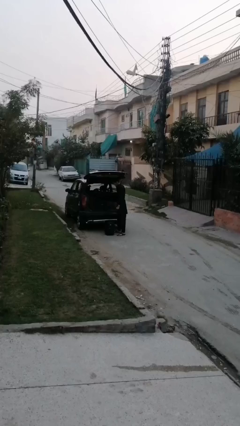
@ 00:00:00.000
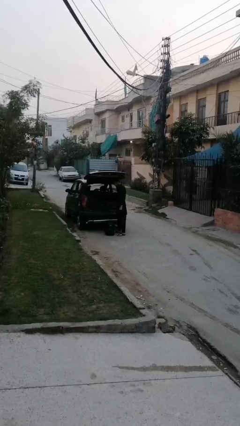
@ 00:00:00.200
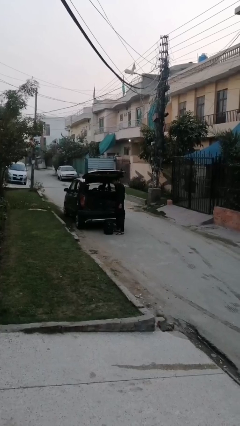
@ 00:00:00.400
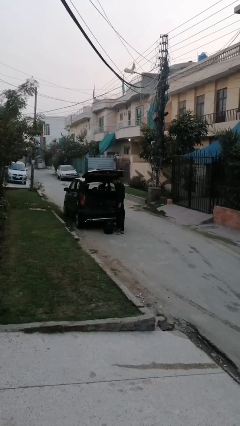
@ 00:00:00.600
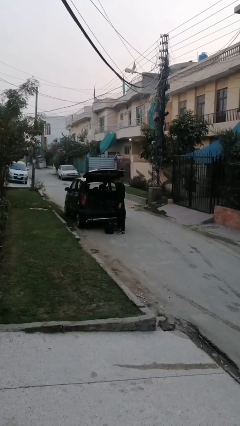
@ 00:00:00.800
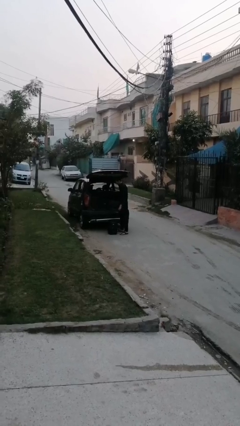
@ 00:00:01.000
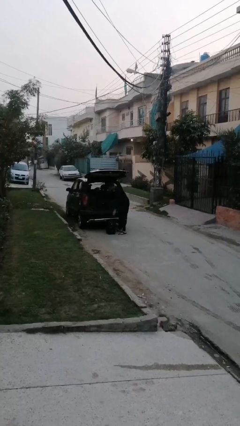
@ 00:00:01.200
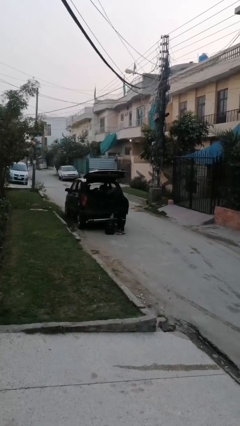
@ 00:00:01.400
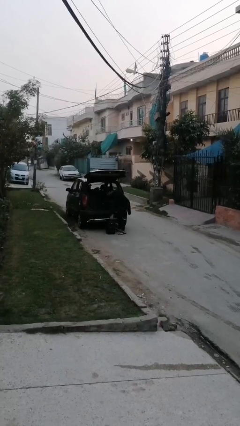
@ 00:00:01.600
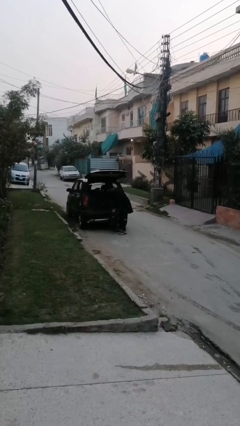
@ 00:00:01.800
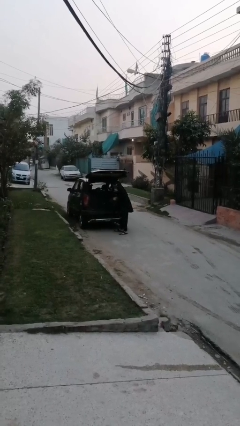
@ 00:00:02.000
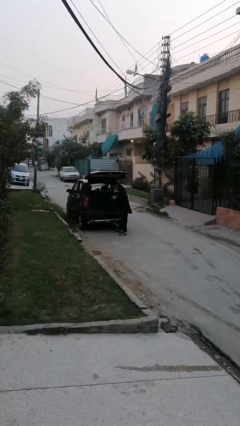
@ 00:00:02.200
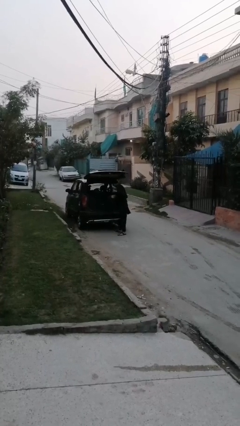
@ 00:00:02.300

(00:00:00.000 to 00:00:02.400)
person unloads car

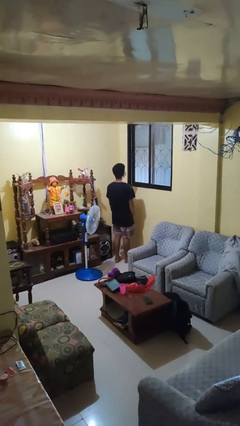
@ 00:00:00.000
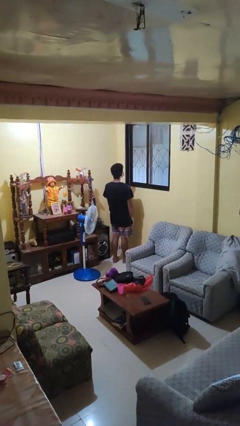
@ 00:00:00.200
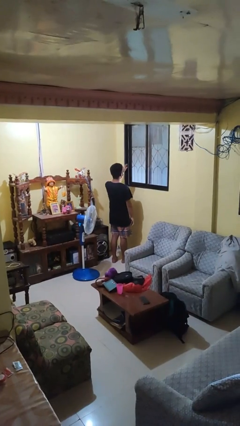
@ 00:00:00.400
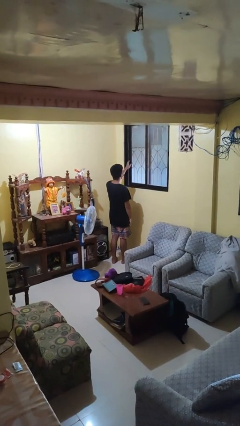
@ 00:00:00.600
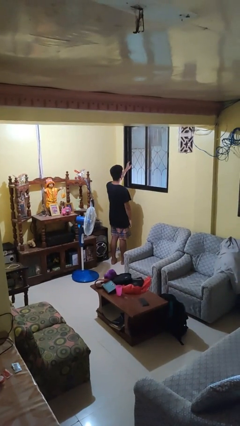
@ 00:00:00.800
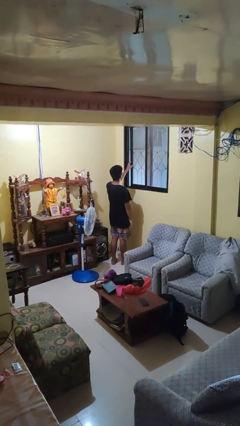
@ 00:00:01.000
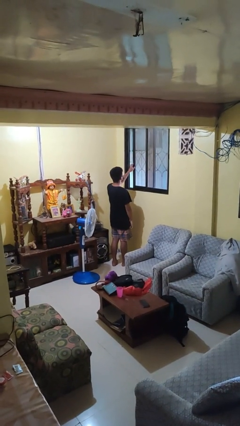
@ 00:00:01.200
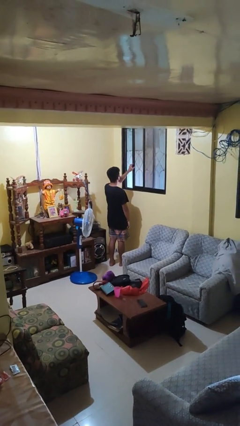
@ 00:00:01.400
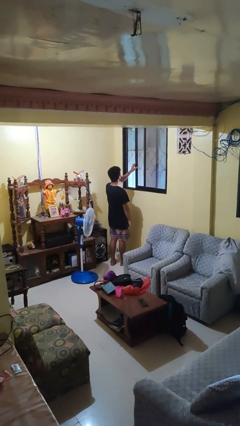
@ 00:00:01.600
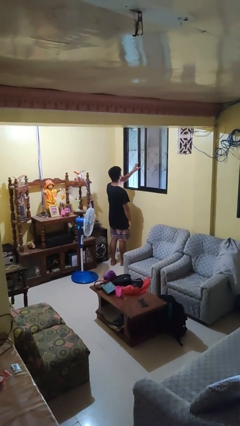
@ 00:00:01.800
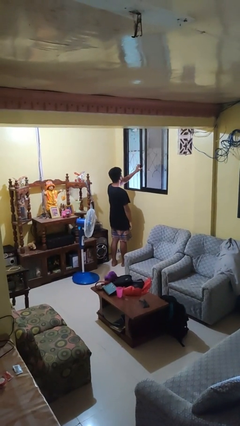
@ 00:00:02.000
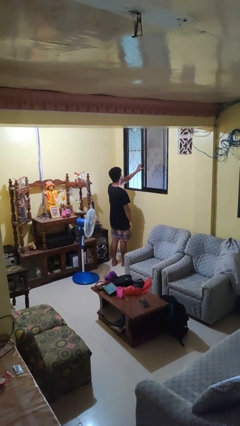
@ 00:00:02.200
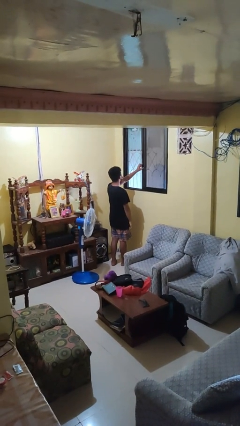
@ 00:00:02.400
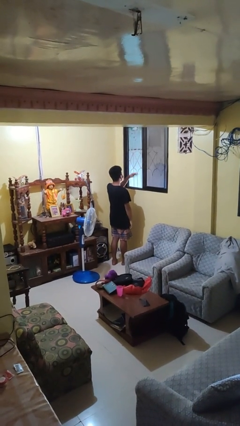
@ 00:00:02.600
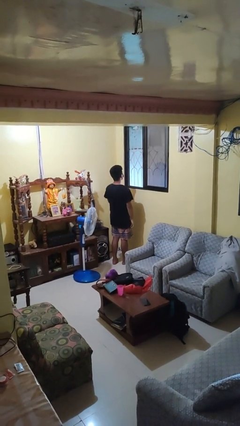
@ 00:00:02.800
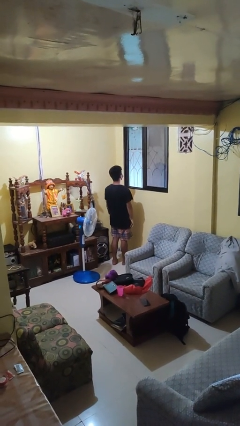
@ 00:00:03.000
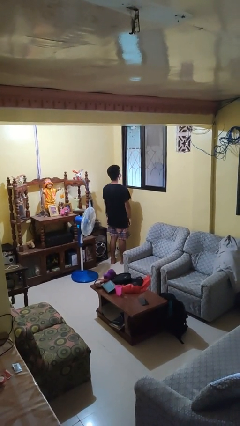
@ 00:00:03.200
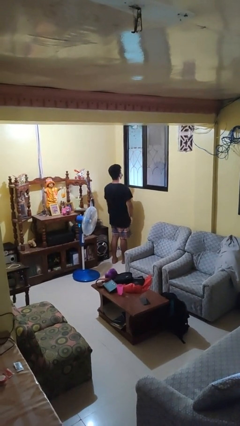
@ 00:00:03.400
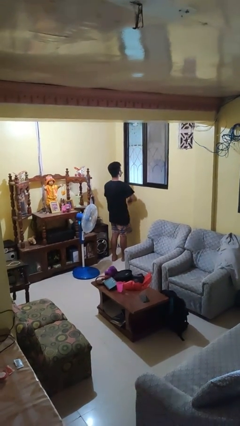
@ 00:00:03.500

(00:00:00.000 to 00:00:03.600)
person opens home window

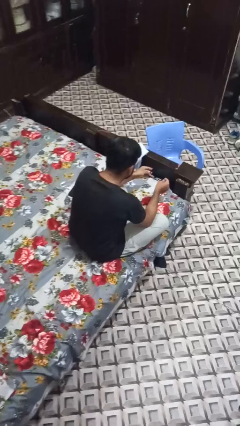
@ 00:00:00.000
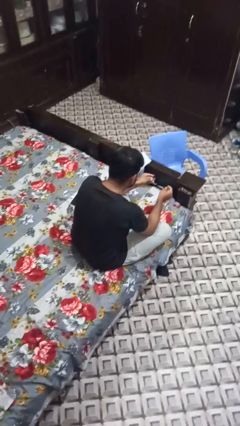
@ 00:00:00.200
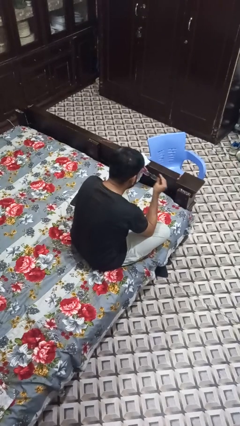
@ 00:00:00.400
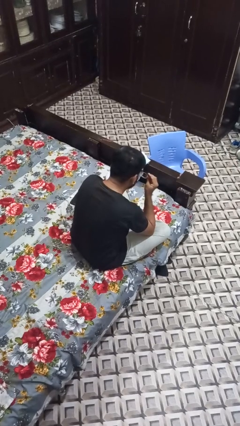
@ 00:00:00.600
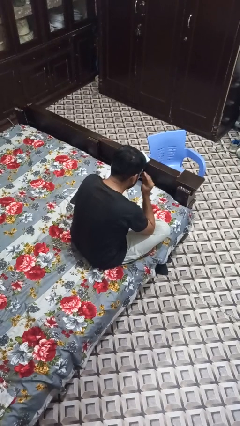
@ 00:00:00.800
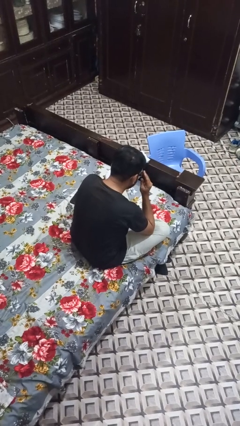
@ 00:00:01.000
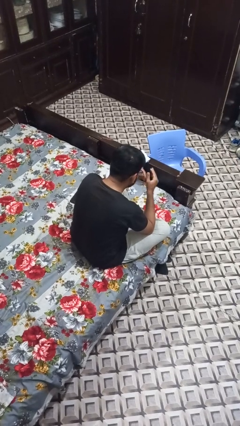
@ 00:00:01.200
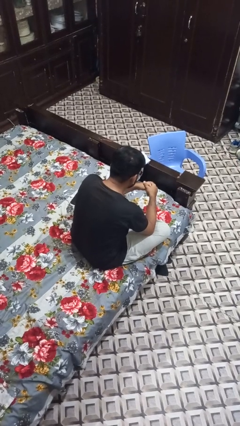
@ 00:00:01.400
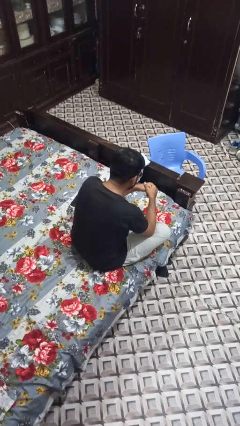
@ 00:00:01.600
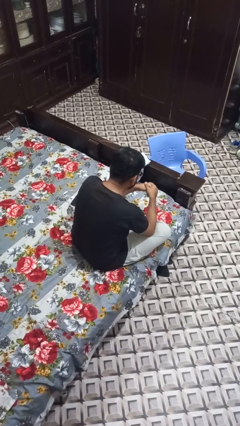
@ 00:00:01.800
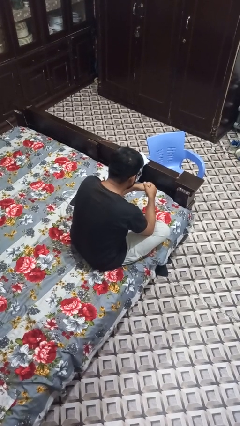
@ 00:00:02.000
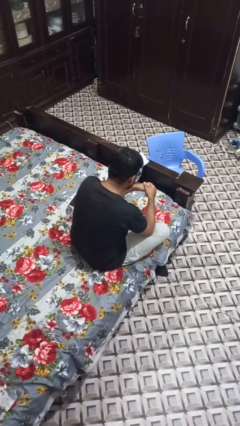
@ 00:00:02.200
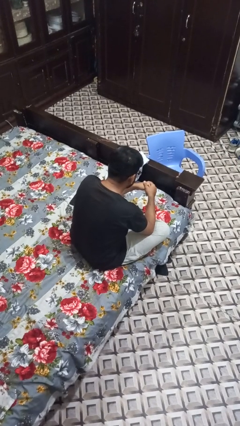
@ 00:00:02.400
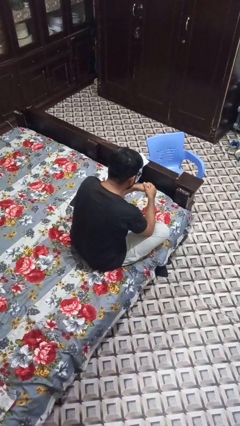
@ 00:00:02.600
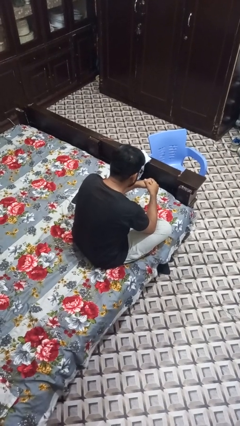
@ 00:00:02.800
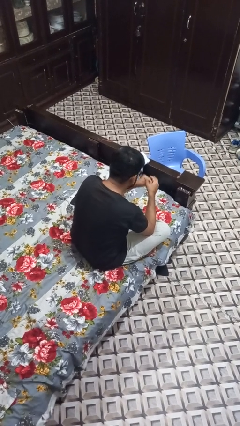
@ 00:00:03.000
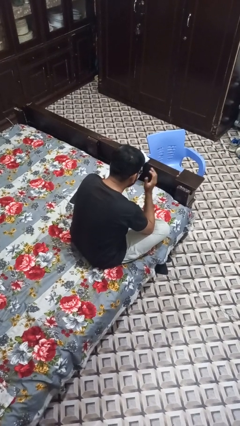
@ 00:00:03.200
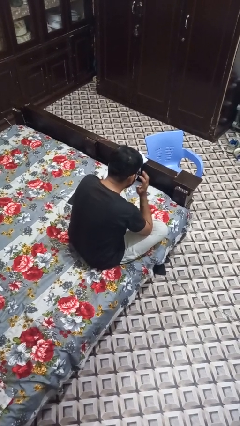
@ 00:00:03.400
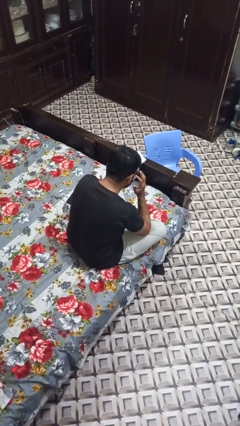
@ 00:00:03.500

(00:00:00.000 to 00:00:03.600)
person puts on glasses

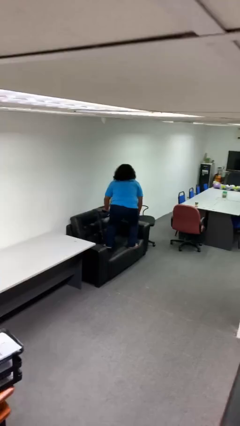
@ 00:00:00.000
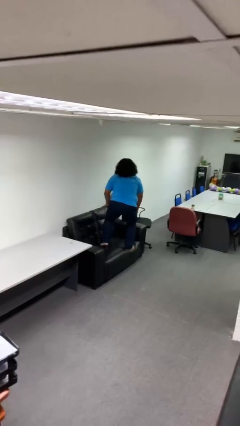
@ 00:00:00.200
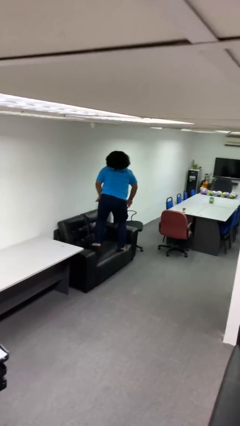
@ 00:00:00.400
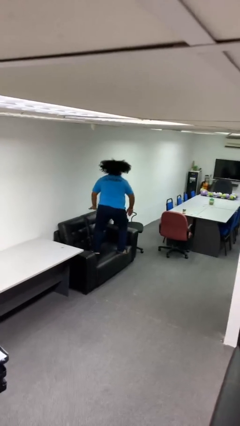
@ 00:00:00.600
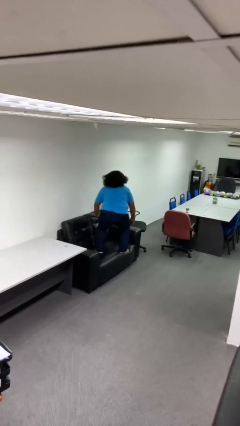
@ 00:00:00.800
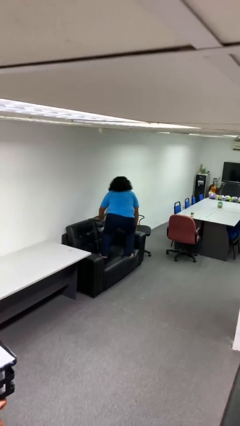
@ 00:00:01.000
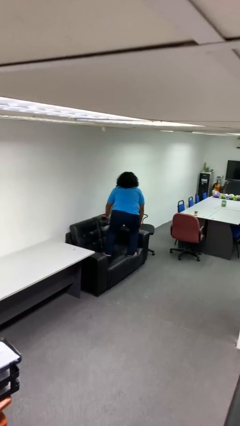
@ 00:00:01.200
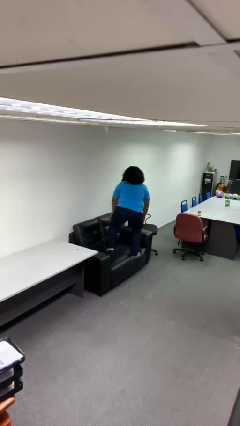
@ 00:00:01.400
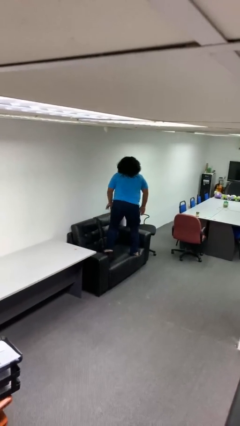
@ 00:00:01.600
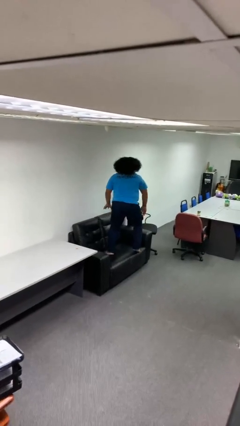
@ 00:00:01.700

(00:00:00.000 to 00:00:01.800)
person jumps on couch

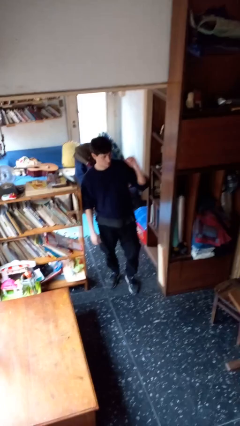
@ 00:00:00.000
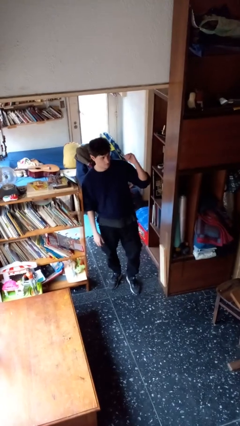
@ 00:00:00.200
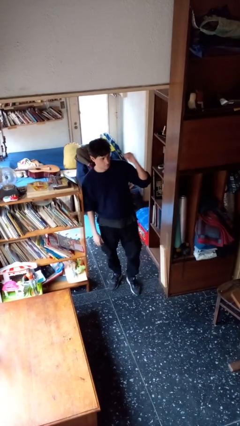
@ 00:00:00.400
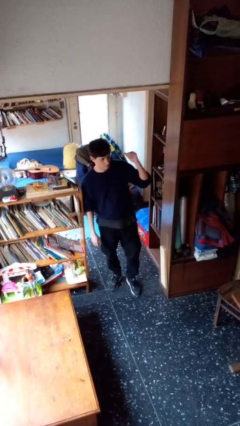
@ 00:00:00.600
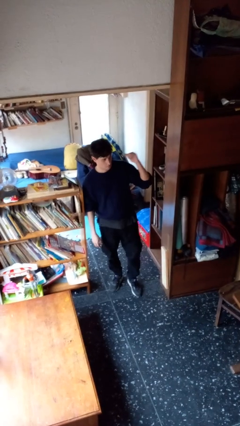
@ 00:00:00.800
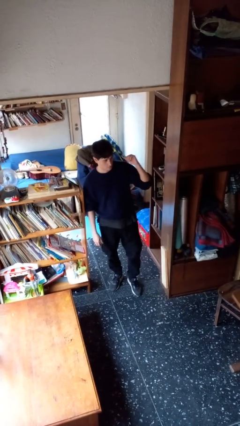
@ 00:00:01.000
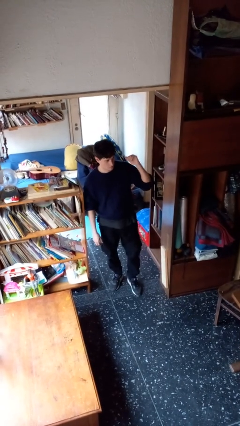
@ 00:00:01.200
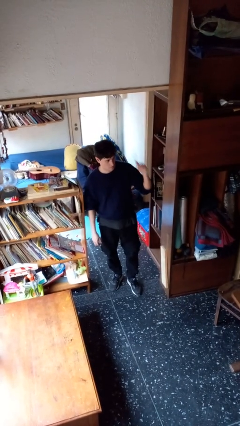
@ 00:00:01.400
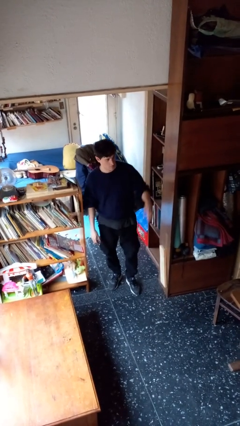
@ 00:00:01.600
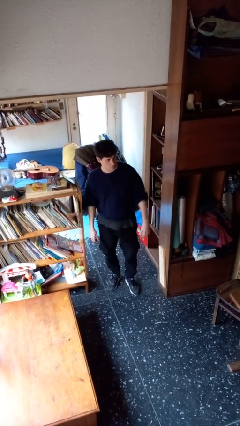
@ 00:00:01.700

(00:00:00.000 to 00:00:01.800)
person gestures behind me

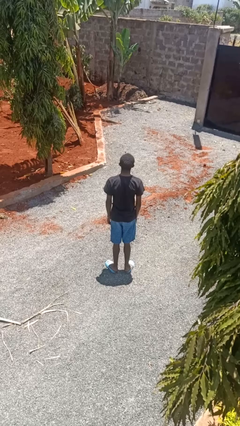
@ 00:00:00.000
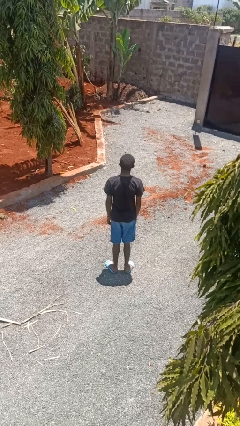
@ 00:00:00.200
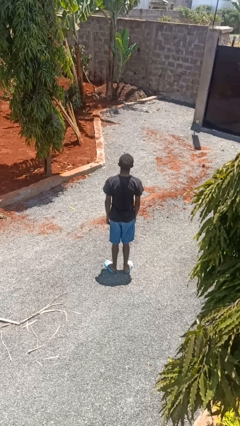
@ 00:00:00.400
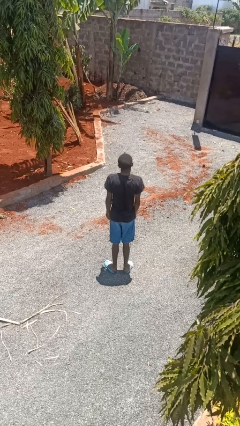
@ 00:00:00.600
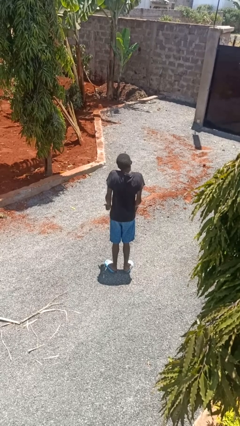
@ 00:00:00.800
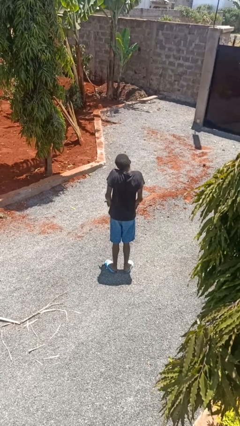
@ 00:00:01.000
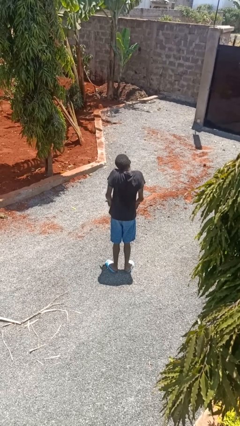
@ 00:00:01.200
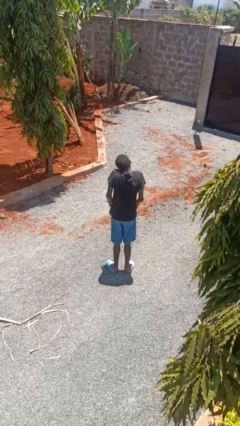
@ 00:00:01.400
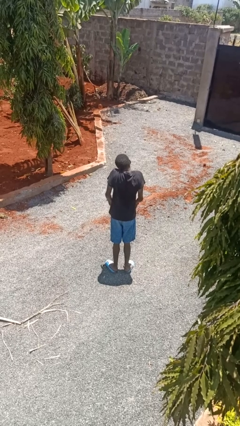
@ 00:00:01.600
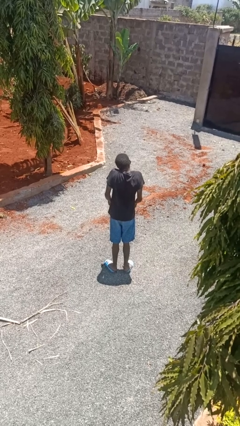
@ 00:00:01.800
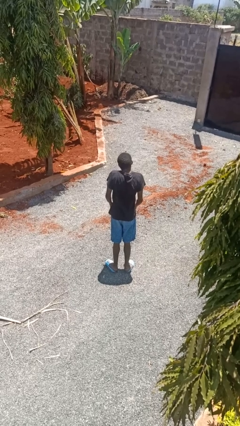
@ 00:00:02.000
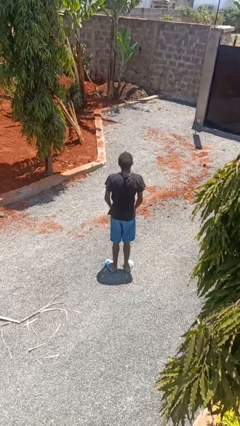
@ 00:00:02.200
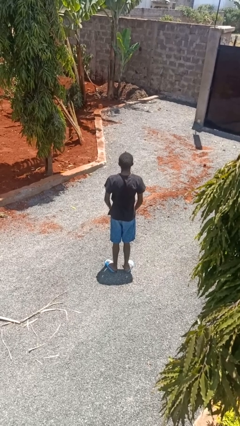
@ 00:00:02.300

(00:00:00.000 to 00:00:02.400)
person shrugs

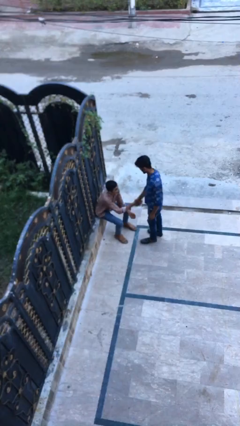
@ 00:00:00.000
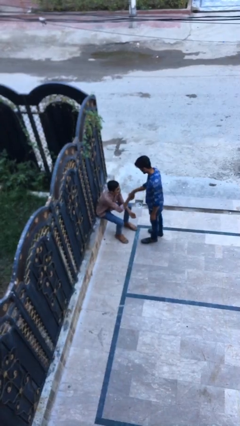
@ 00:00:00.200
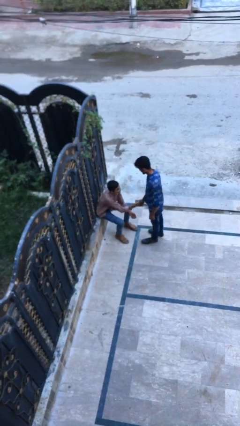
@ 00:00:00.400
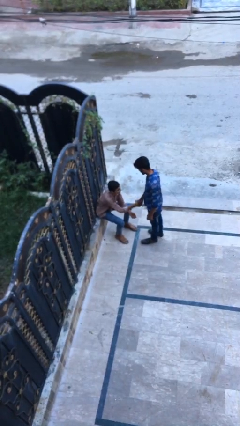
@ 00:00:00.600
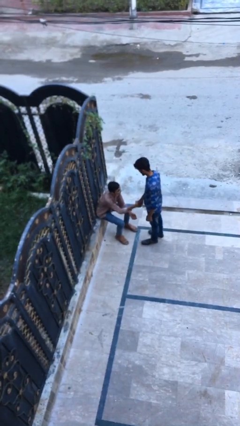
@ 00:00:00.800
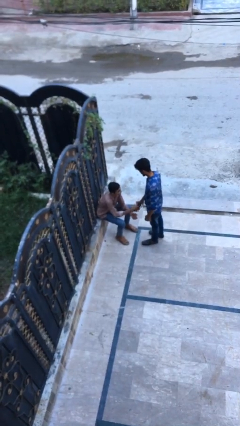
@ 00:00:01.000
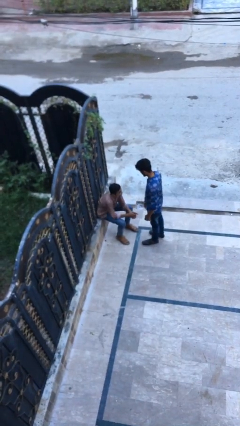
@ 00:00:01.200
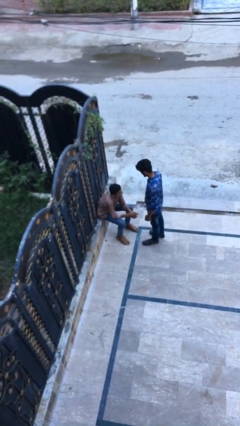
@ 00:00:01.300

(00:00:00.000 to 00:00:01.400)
person shakes hand
